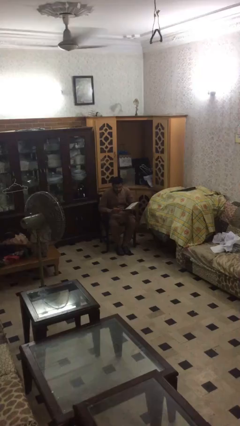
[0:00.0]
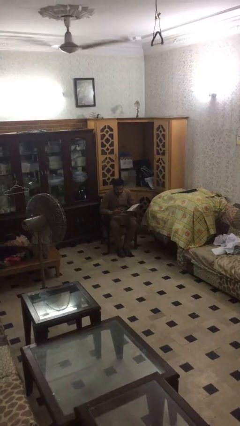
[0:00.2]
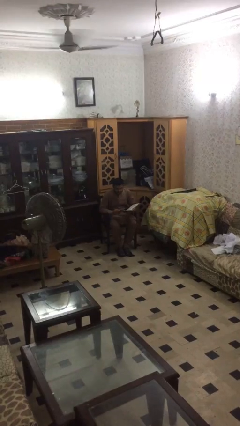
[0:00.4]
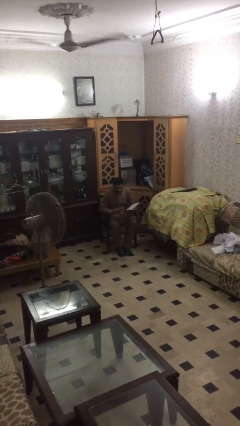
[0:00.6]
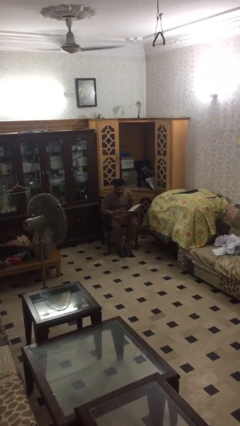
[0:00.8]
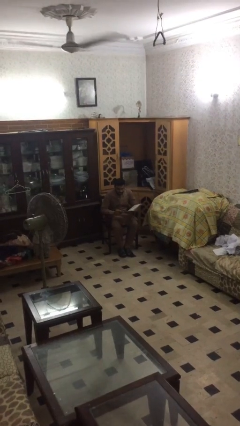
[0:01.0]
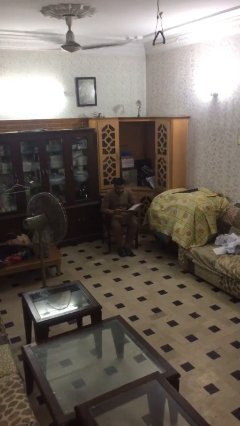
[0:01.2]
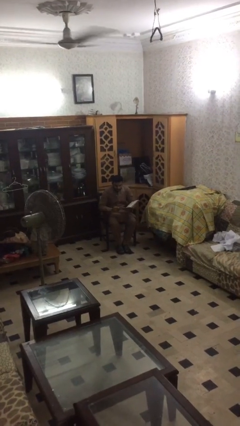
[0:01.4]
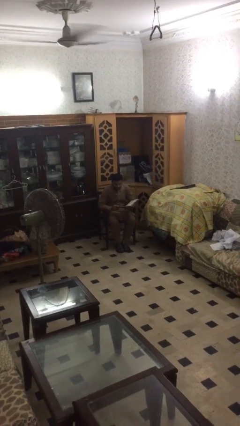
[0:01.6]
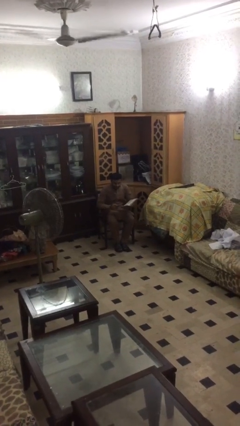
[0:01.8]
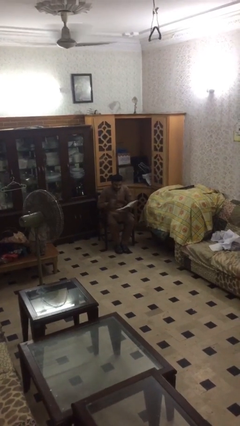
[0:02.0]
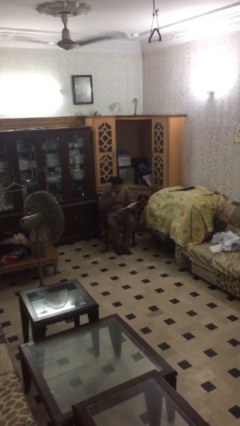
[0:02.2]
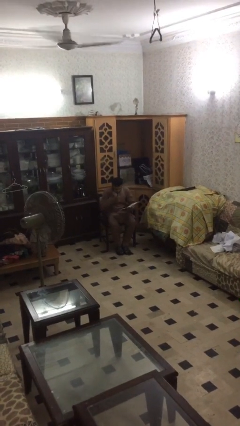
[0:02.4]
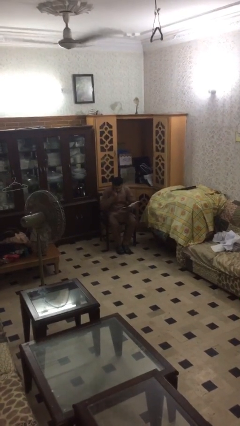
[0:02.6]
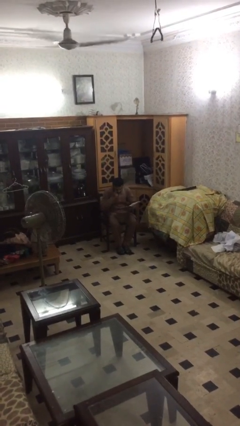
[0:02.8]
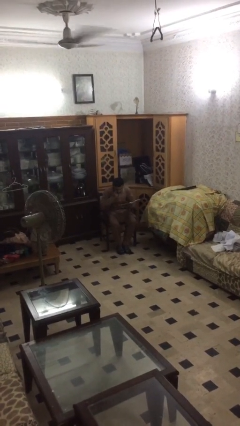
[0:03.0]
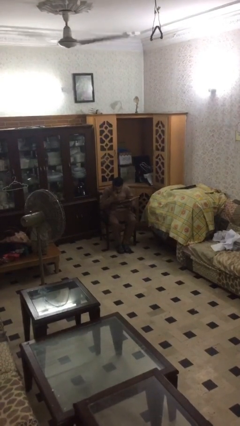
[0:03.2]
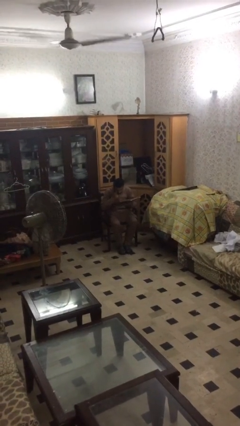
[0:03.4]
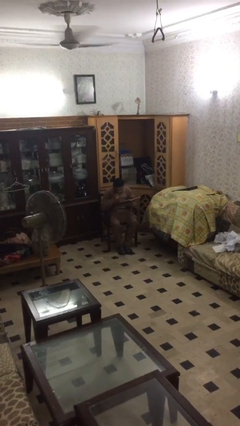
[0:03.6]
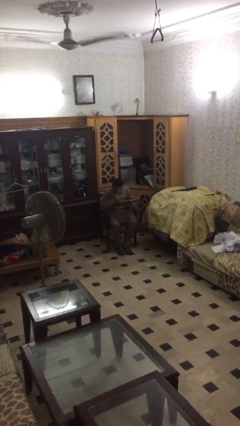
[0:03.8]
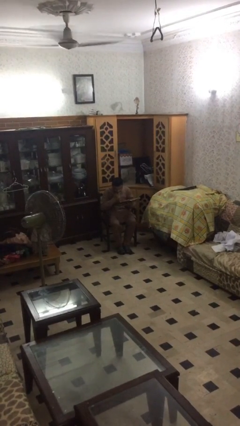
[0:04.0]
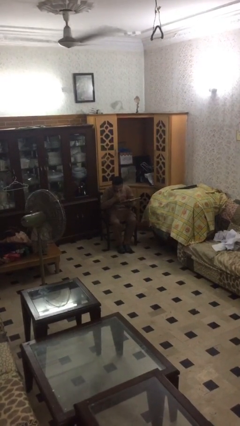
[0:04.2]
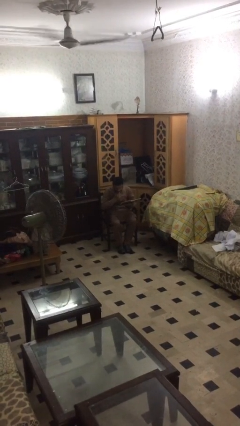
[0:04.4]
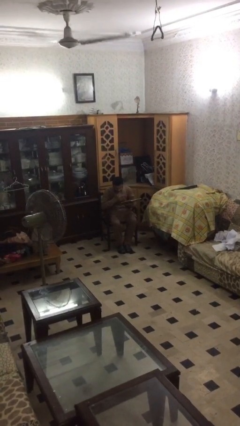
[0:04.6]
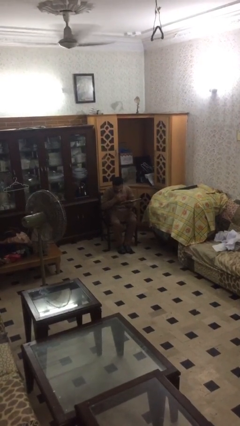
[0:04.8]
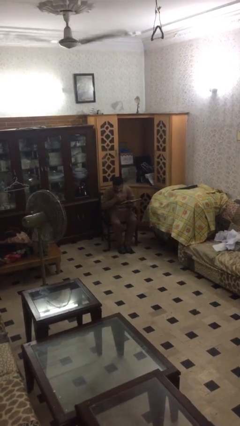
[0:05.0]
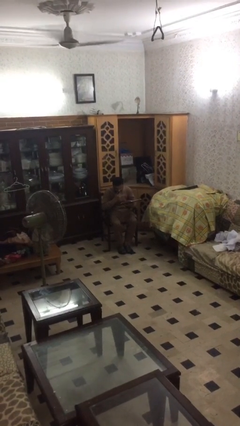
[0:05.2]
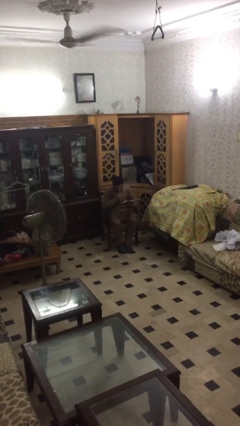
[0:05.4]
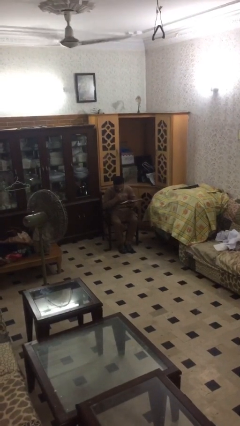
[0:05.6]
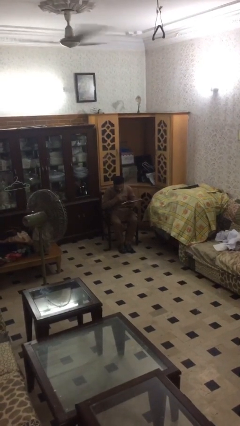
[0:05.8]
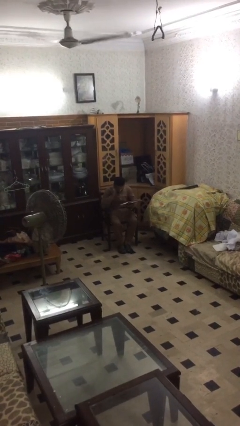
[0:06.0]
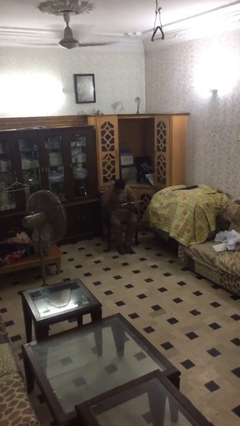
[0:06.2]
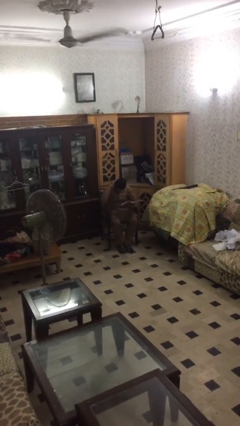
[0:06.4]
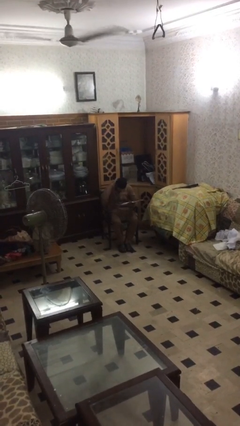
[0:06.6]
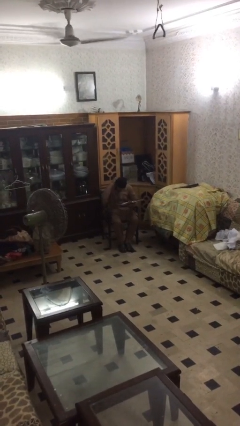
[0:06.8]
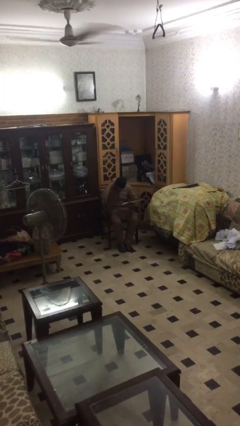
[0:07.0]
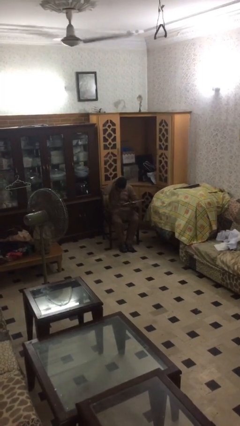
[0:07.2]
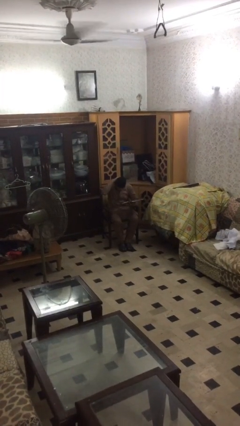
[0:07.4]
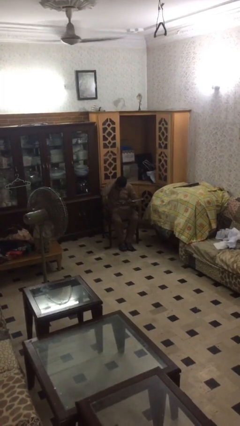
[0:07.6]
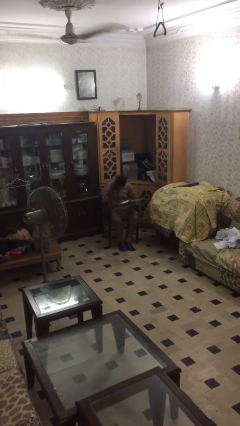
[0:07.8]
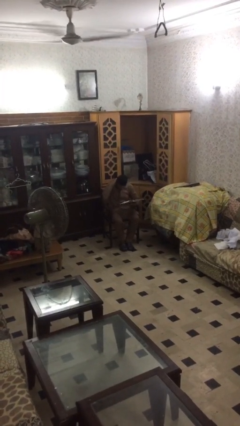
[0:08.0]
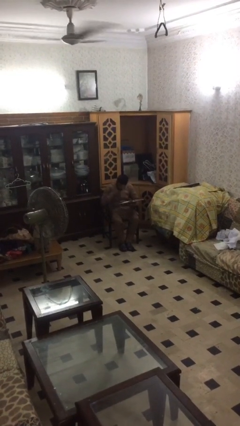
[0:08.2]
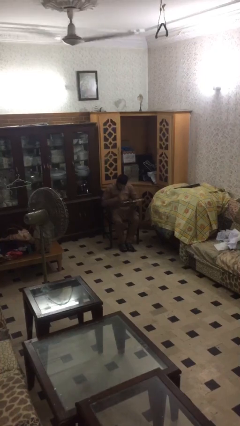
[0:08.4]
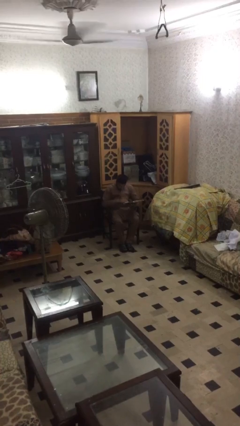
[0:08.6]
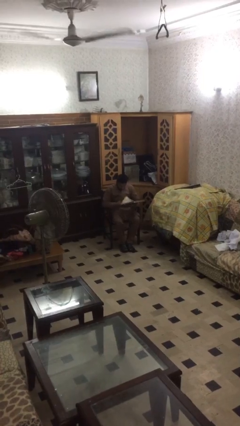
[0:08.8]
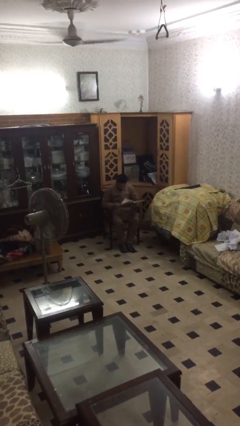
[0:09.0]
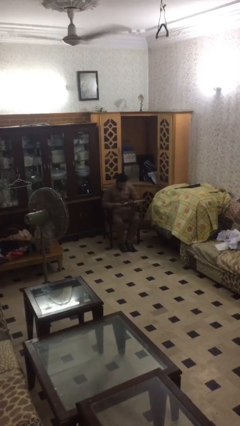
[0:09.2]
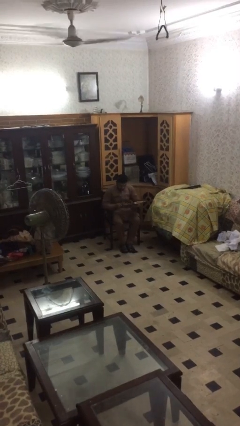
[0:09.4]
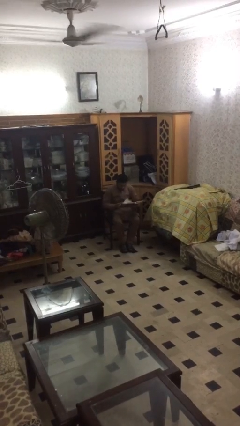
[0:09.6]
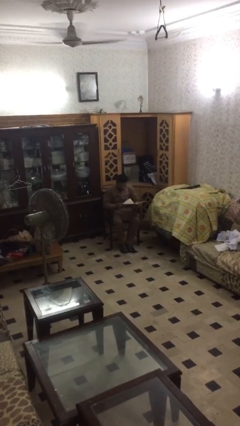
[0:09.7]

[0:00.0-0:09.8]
person reads document

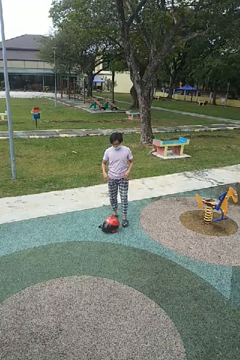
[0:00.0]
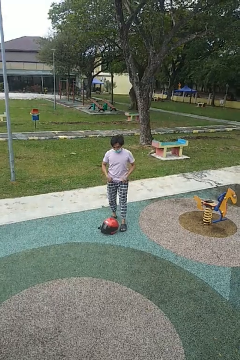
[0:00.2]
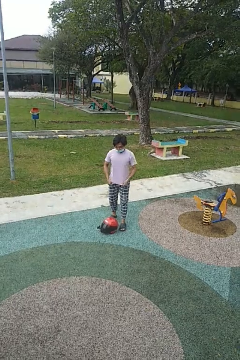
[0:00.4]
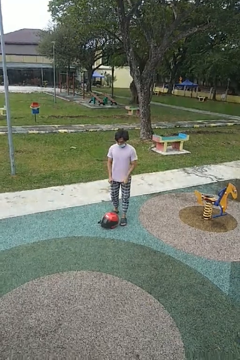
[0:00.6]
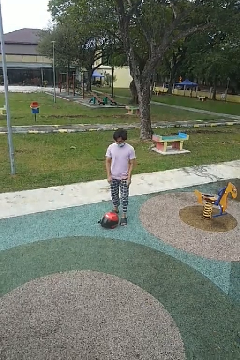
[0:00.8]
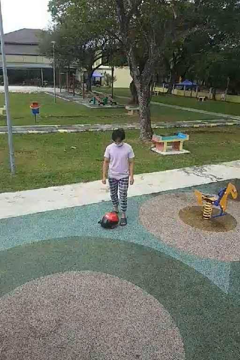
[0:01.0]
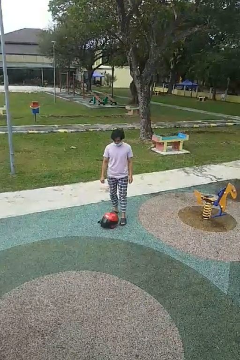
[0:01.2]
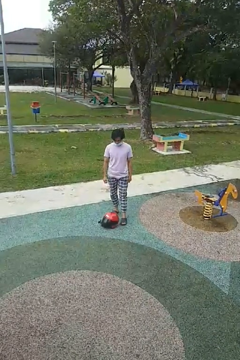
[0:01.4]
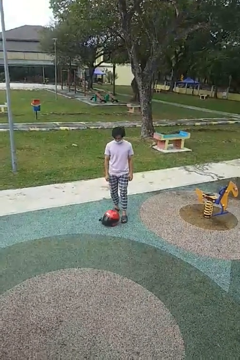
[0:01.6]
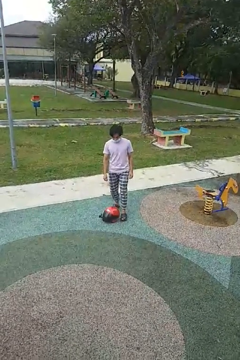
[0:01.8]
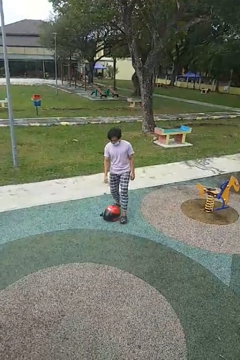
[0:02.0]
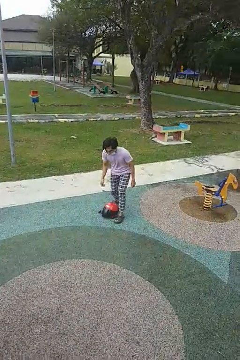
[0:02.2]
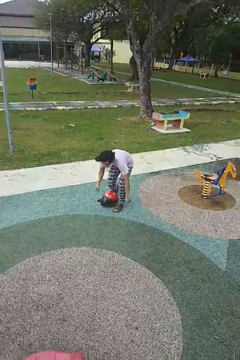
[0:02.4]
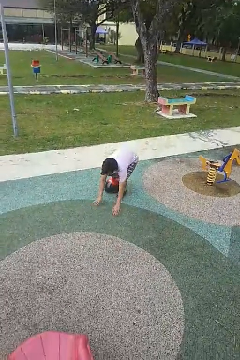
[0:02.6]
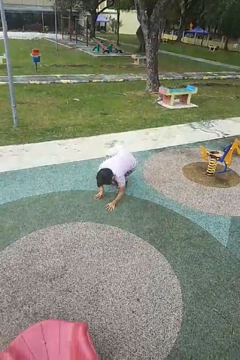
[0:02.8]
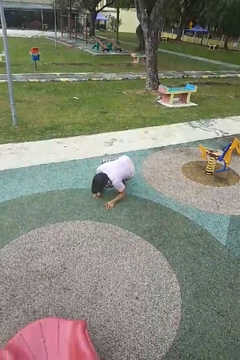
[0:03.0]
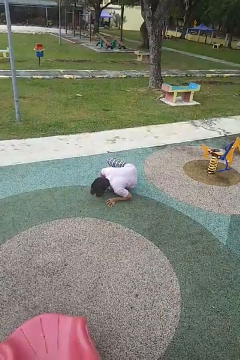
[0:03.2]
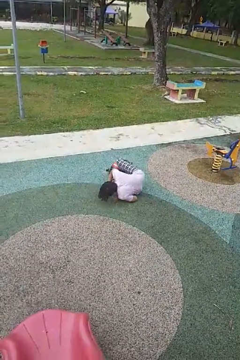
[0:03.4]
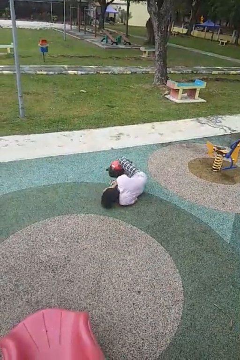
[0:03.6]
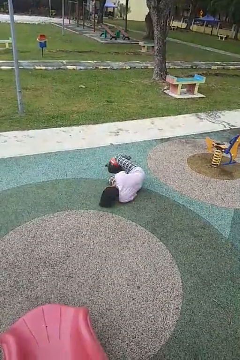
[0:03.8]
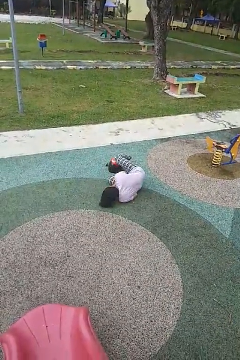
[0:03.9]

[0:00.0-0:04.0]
person trips on object on floor

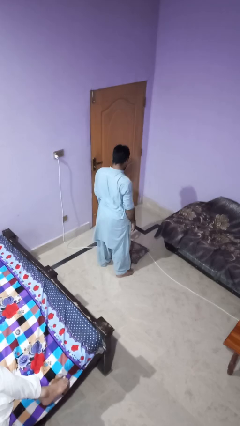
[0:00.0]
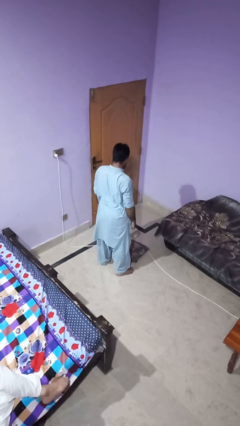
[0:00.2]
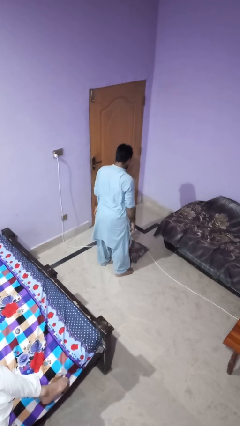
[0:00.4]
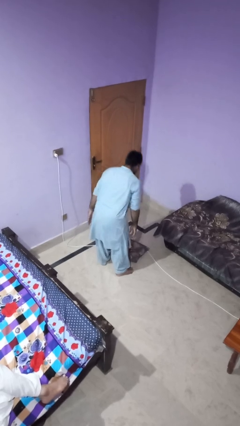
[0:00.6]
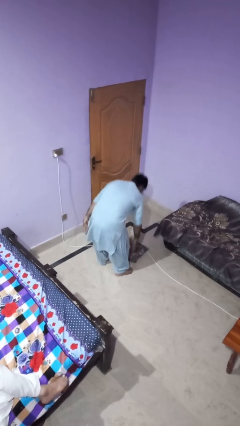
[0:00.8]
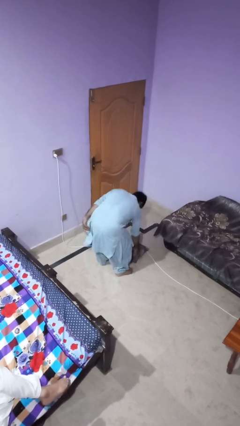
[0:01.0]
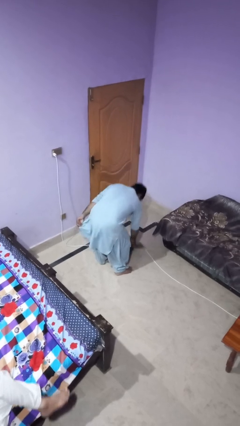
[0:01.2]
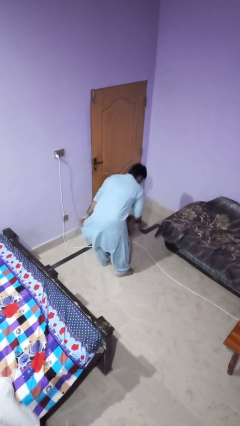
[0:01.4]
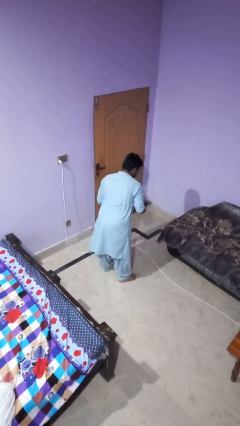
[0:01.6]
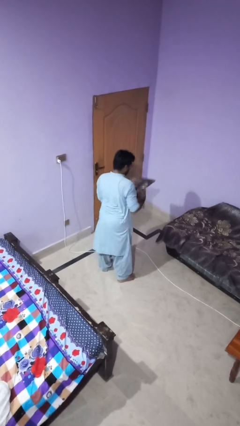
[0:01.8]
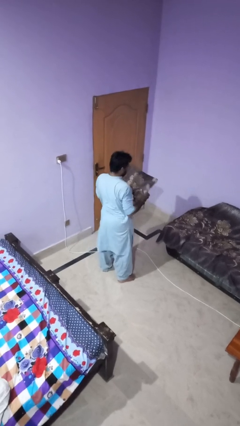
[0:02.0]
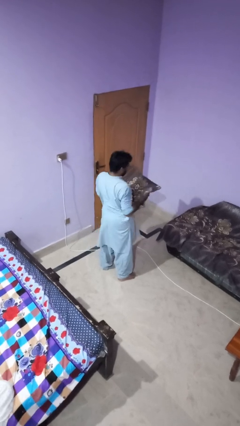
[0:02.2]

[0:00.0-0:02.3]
person picks up object from floor

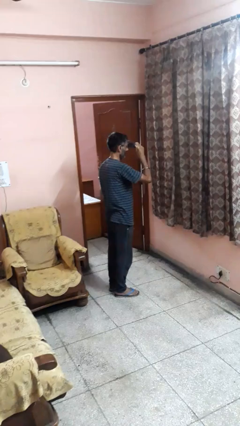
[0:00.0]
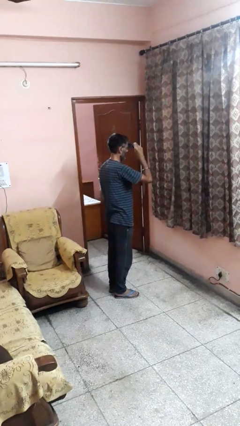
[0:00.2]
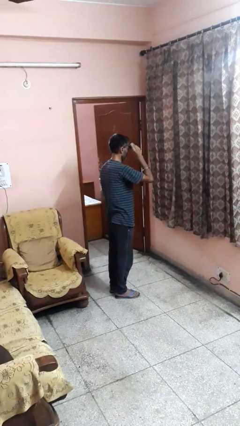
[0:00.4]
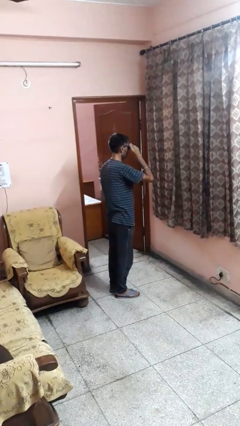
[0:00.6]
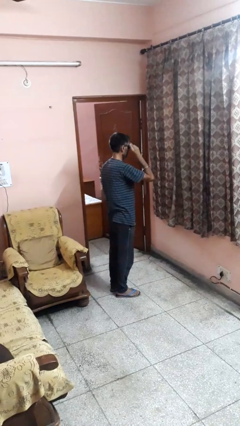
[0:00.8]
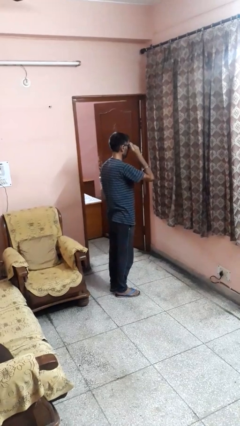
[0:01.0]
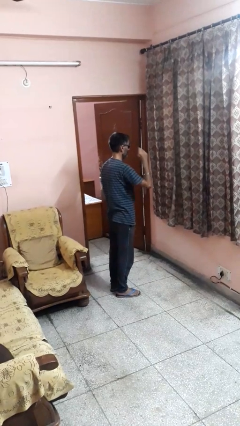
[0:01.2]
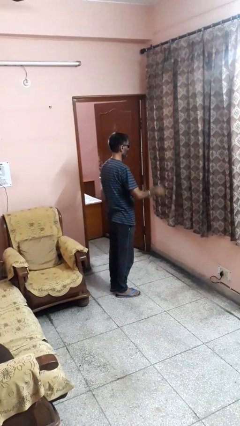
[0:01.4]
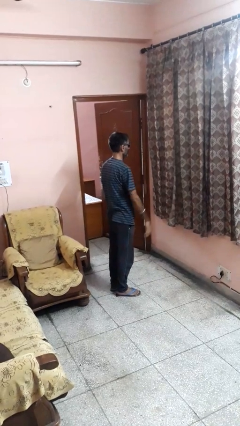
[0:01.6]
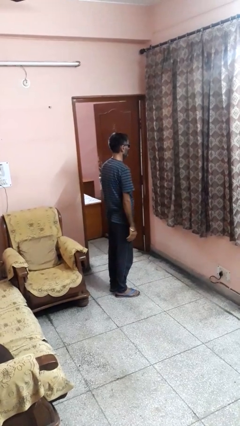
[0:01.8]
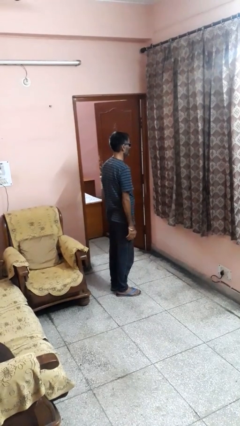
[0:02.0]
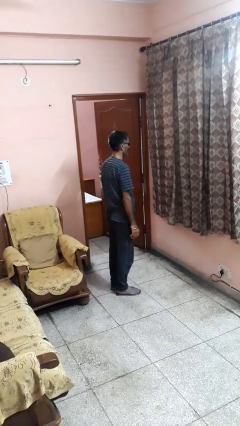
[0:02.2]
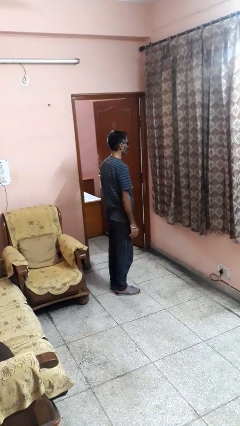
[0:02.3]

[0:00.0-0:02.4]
person puts on sunglasses
